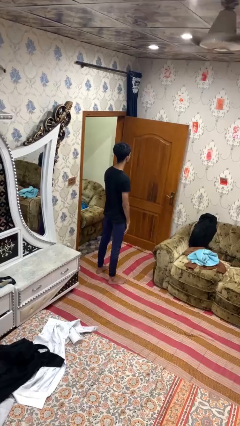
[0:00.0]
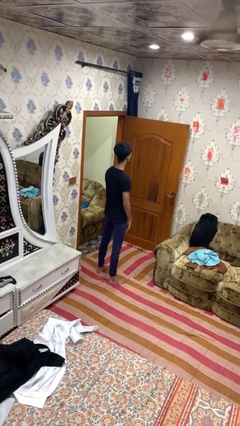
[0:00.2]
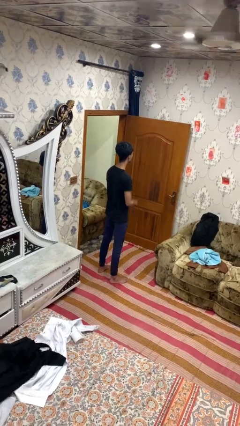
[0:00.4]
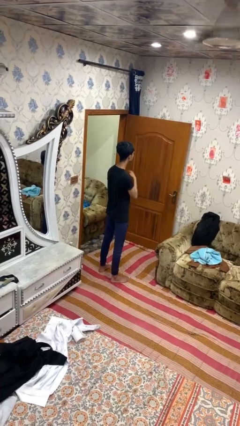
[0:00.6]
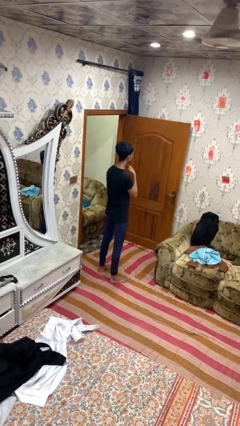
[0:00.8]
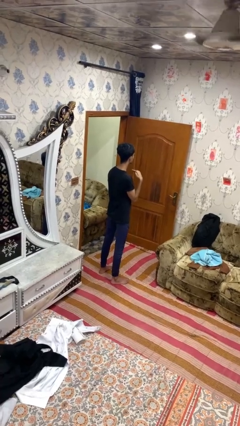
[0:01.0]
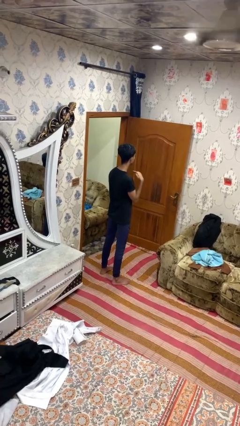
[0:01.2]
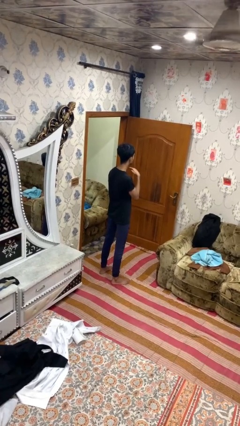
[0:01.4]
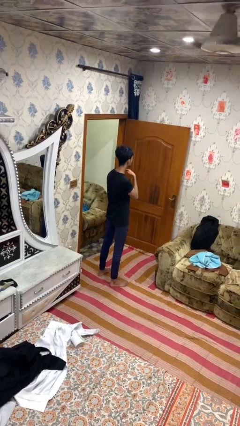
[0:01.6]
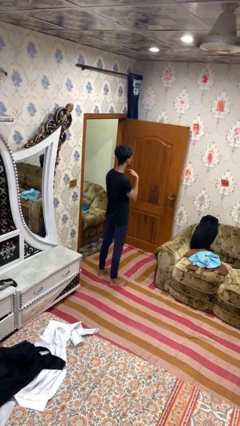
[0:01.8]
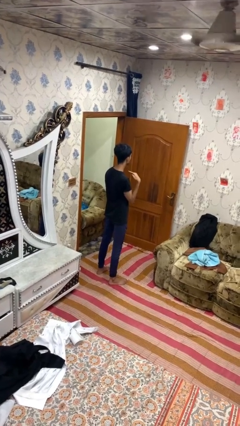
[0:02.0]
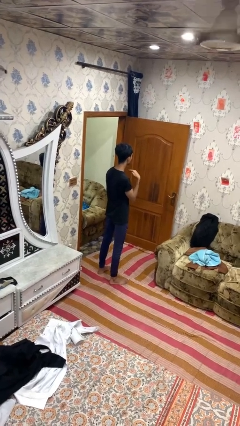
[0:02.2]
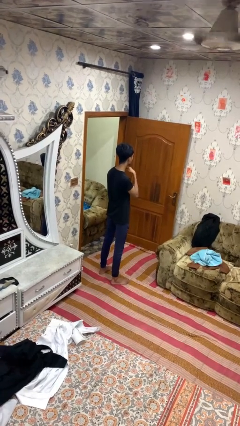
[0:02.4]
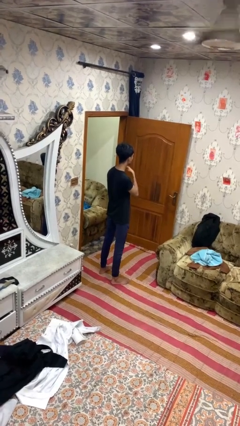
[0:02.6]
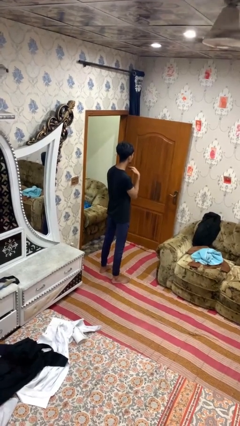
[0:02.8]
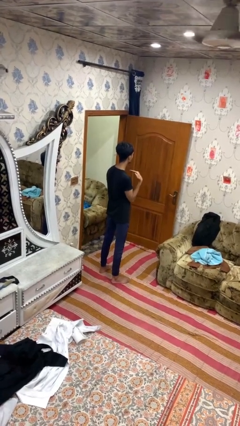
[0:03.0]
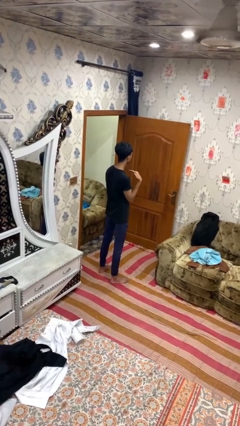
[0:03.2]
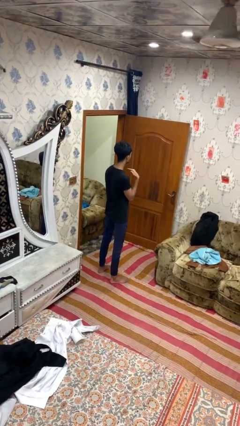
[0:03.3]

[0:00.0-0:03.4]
person gestures cut

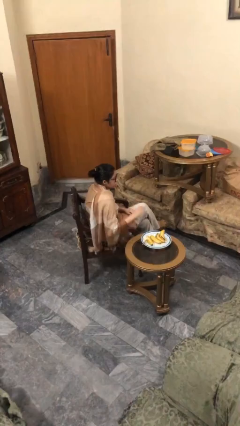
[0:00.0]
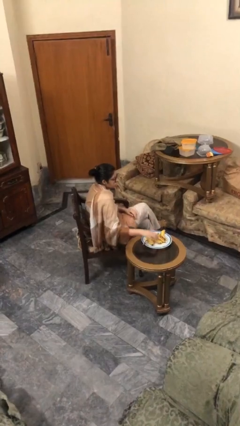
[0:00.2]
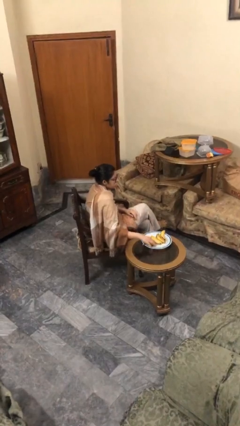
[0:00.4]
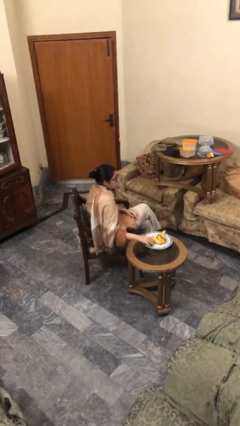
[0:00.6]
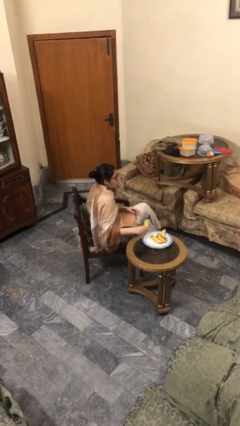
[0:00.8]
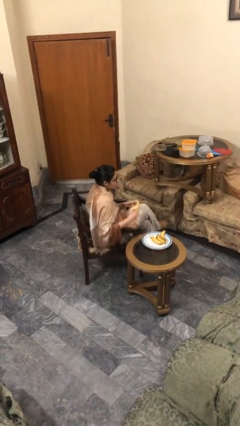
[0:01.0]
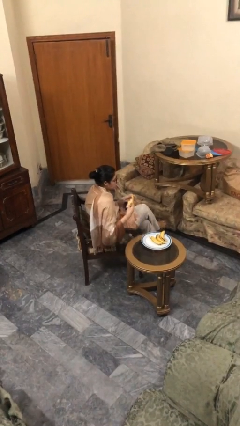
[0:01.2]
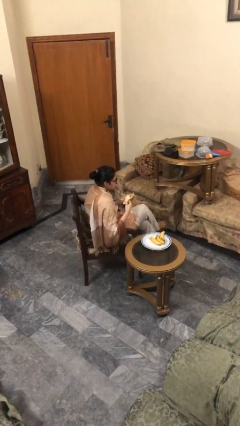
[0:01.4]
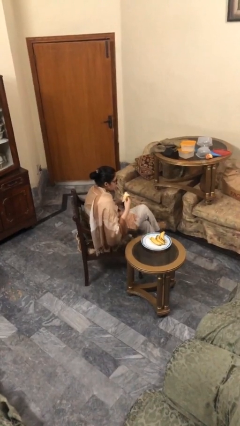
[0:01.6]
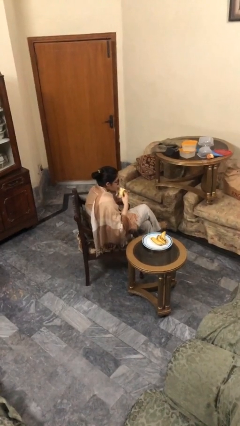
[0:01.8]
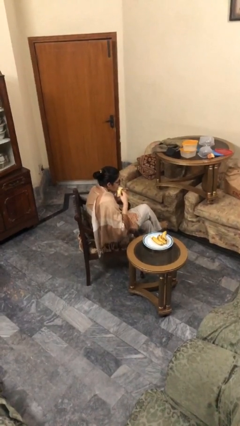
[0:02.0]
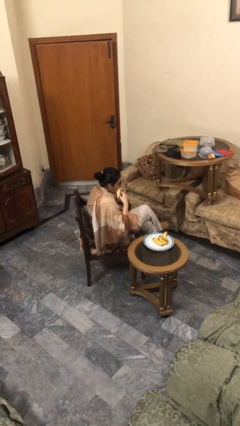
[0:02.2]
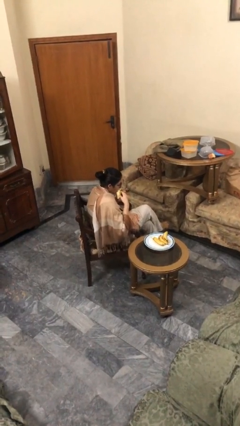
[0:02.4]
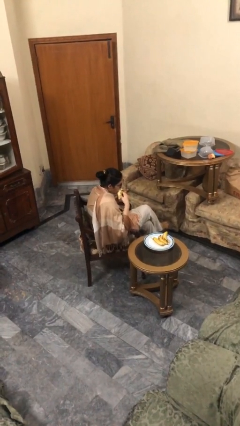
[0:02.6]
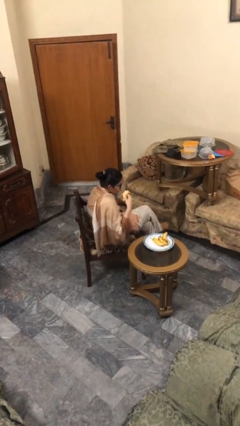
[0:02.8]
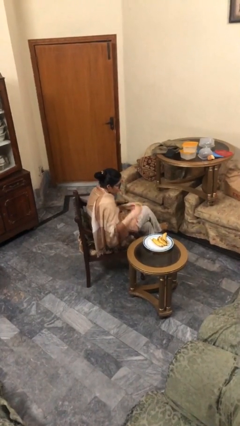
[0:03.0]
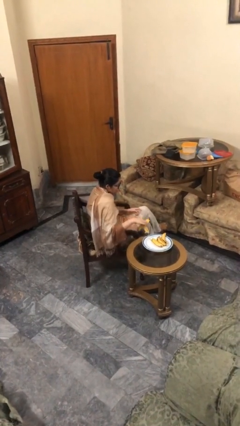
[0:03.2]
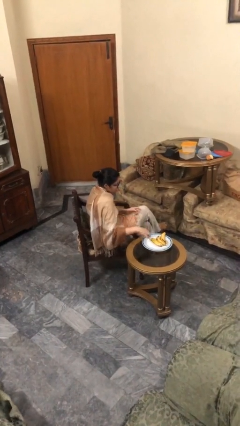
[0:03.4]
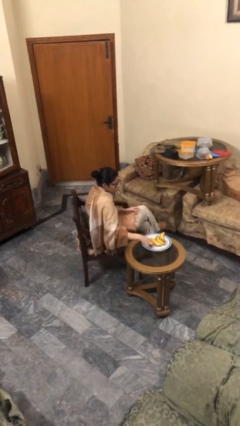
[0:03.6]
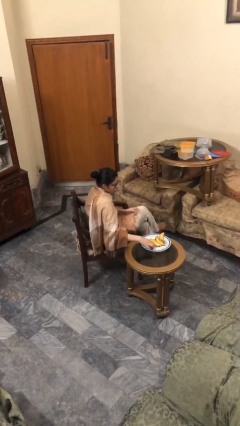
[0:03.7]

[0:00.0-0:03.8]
person eats banana

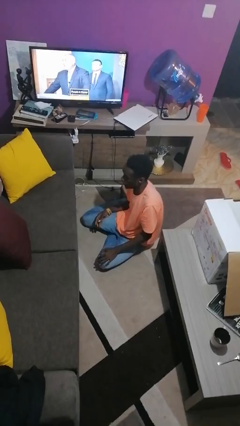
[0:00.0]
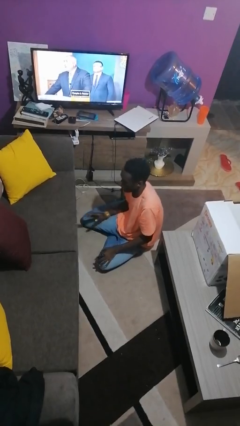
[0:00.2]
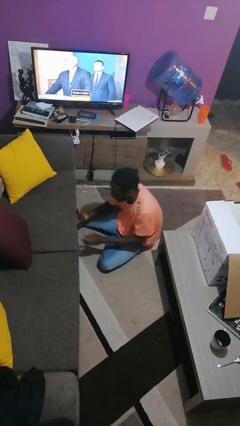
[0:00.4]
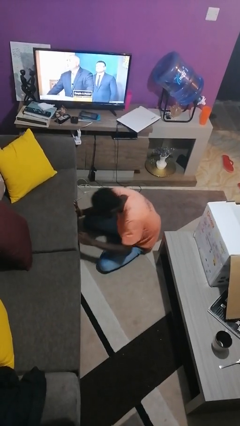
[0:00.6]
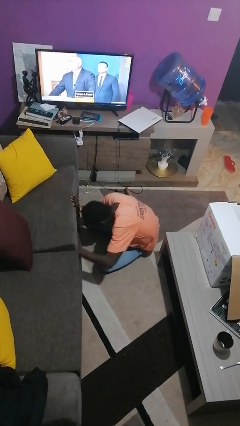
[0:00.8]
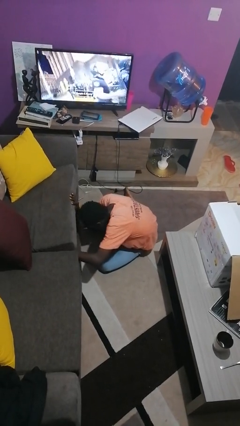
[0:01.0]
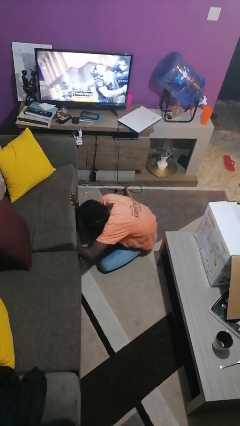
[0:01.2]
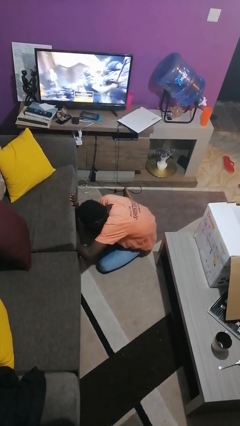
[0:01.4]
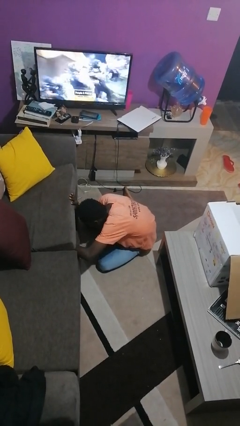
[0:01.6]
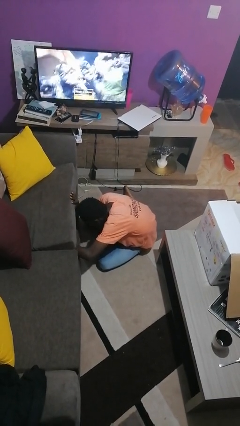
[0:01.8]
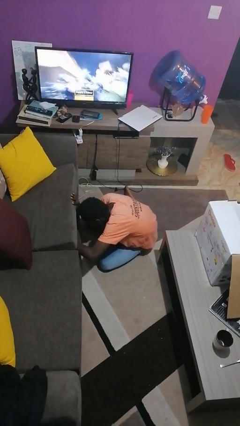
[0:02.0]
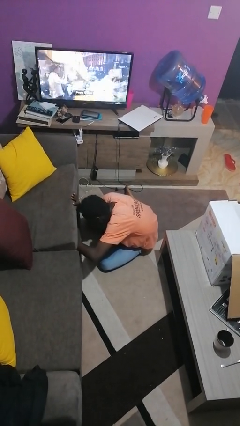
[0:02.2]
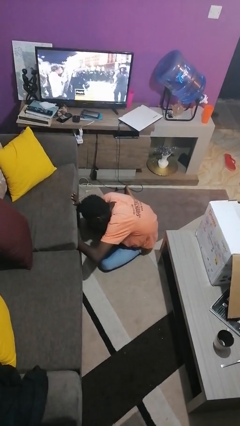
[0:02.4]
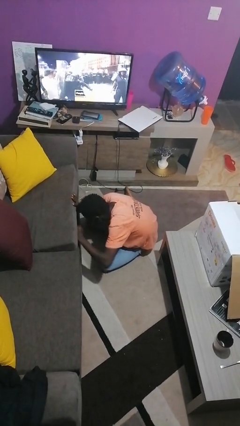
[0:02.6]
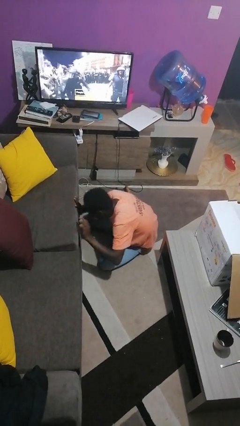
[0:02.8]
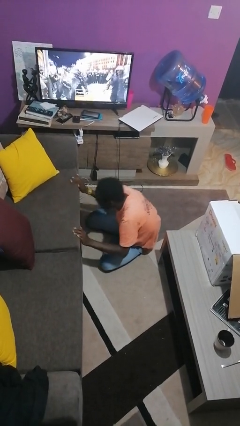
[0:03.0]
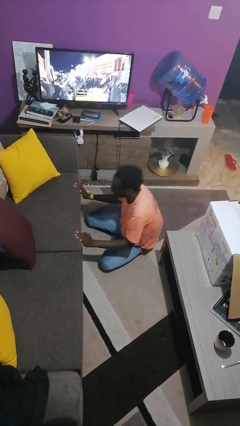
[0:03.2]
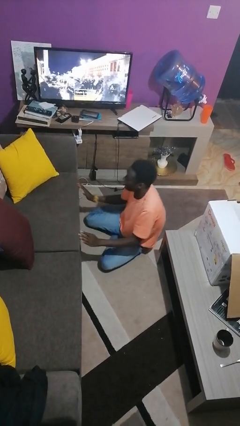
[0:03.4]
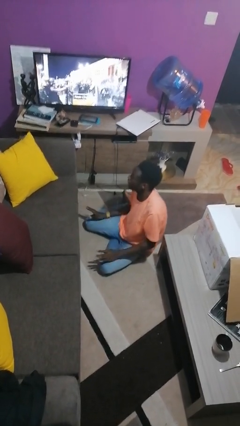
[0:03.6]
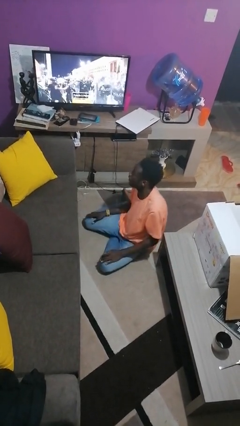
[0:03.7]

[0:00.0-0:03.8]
person searches under couch

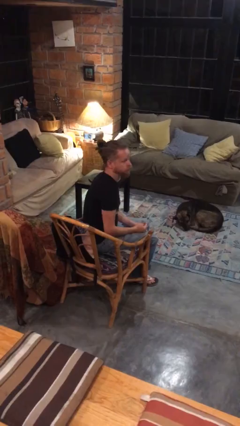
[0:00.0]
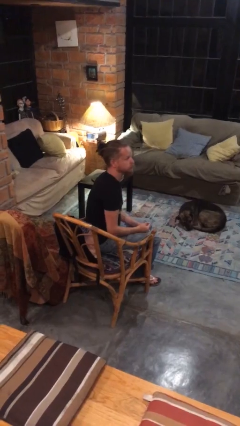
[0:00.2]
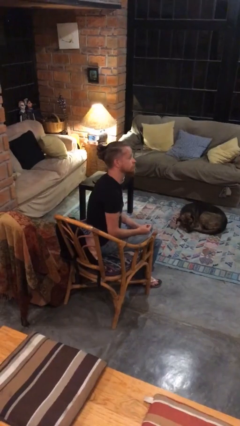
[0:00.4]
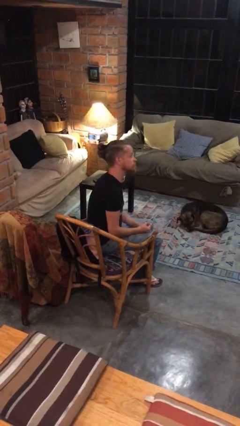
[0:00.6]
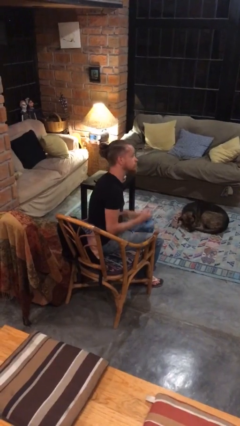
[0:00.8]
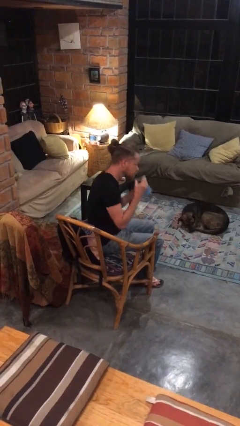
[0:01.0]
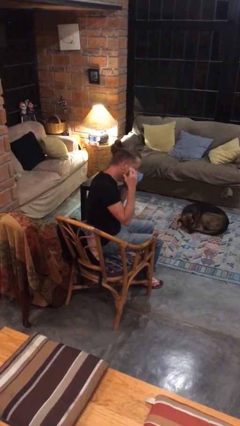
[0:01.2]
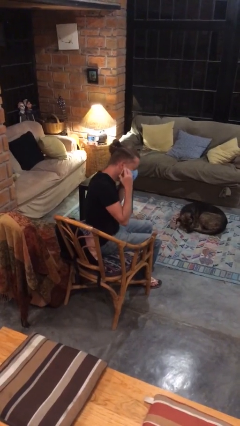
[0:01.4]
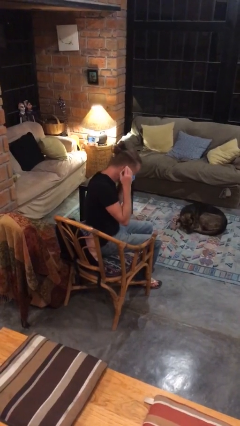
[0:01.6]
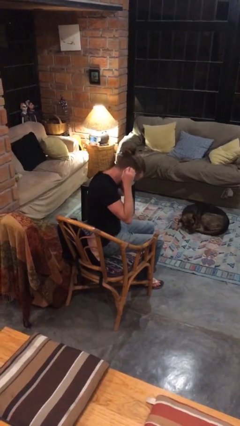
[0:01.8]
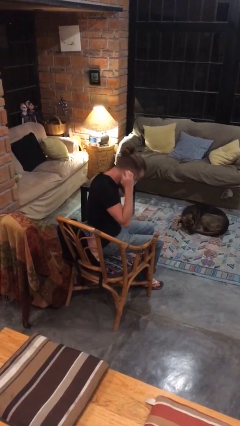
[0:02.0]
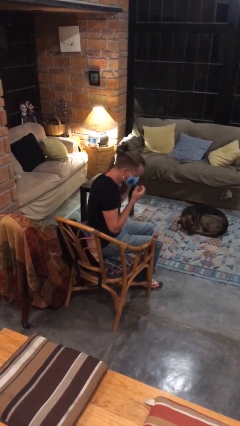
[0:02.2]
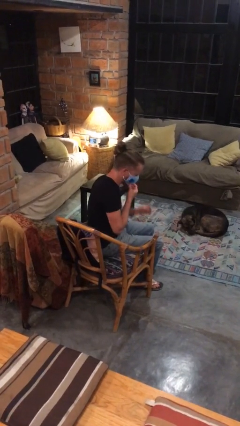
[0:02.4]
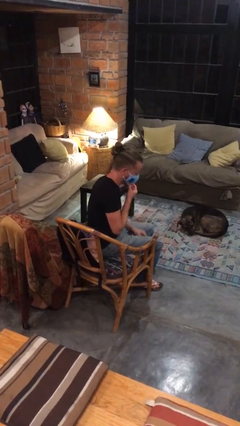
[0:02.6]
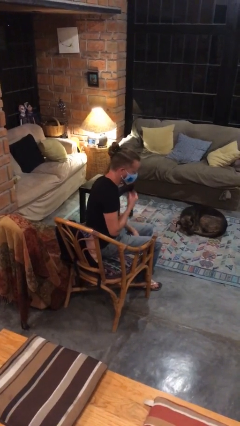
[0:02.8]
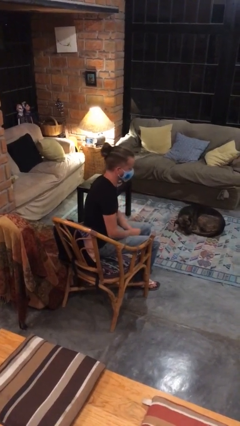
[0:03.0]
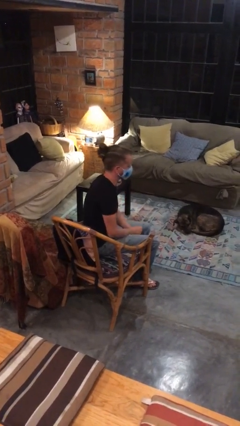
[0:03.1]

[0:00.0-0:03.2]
person puts on facemask

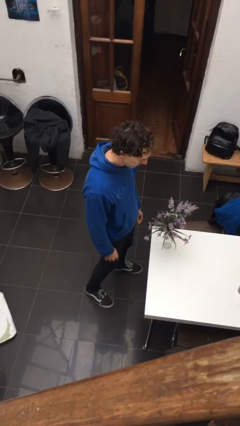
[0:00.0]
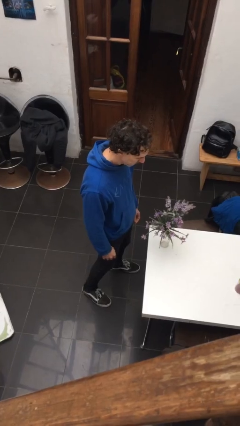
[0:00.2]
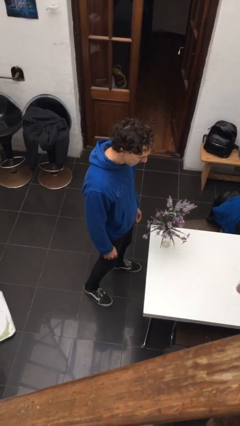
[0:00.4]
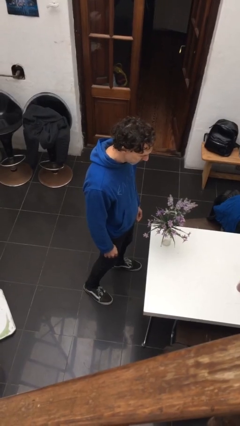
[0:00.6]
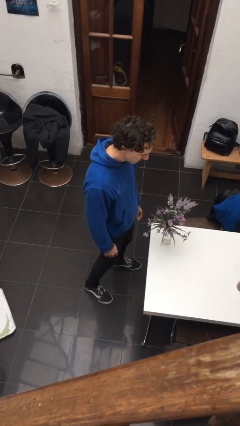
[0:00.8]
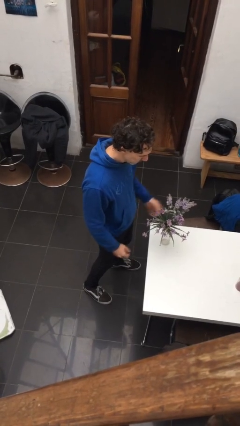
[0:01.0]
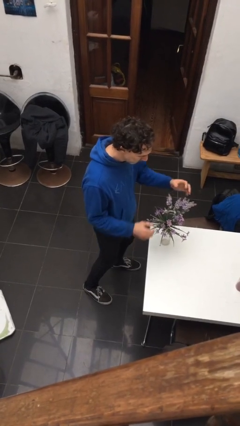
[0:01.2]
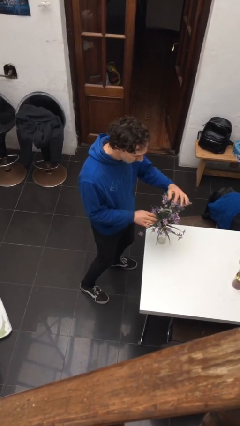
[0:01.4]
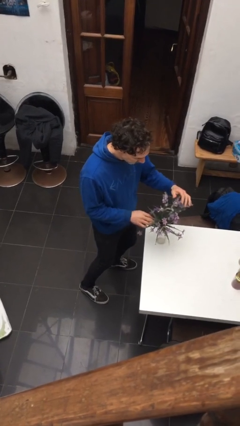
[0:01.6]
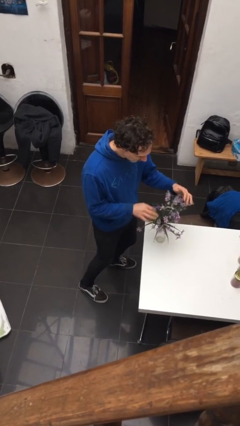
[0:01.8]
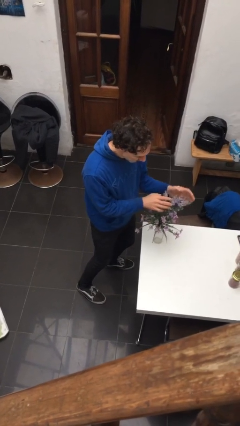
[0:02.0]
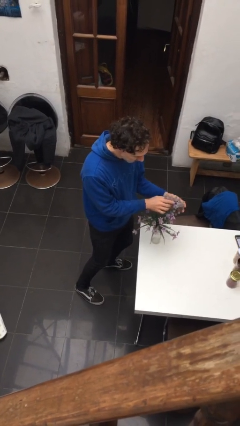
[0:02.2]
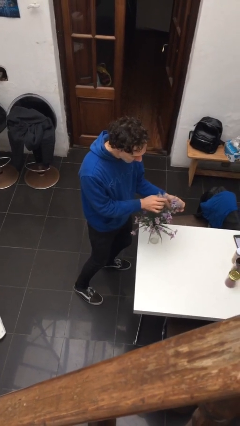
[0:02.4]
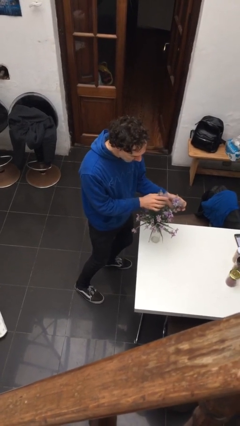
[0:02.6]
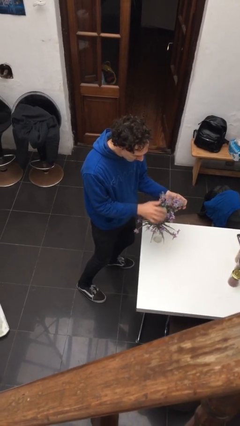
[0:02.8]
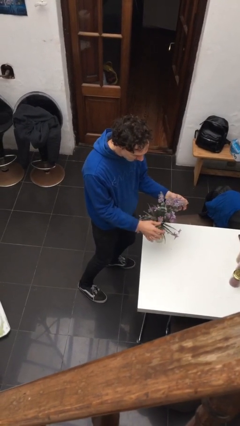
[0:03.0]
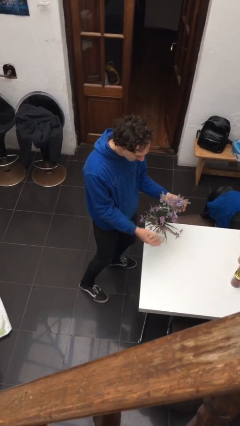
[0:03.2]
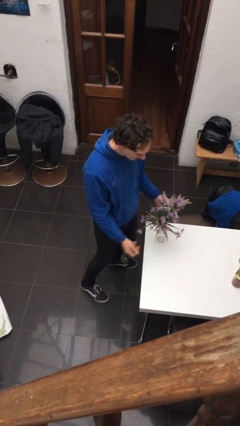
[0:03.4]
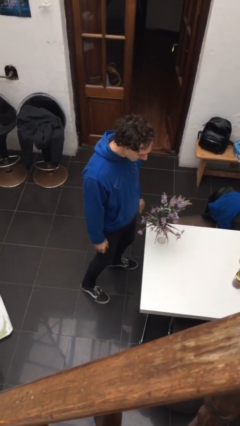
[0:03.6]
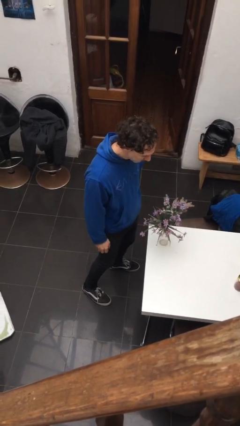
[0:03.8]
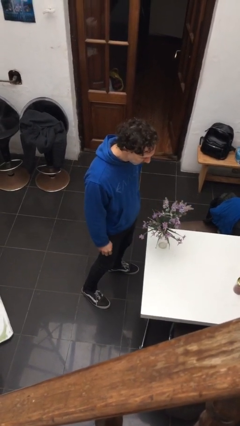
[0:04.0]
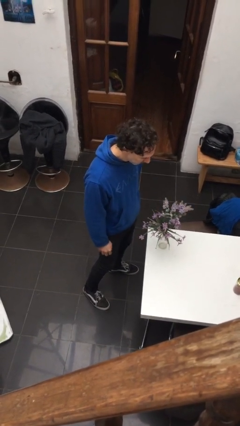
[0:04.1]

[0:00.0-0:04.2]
person arranges flowers in vase
